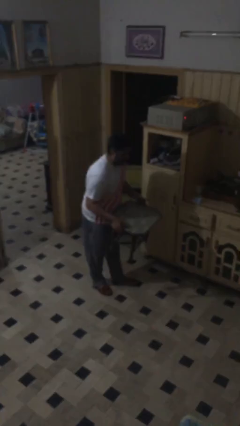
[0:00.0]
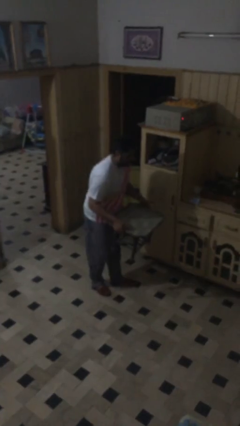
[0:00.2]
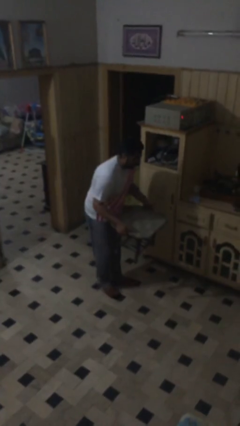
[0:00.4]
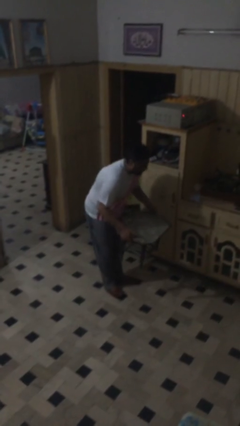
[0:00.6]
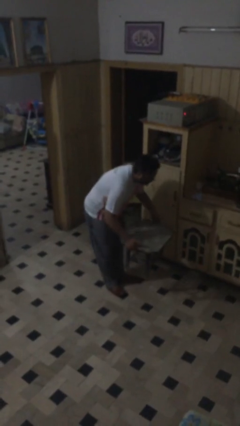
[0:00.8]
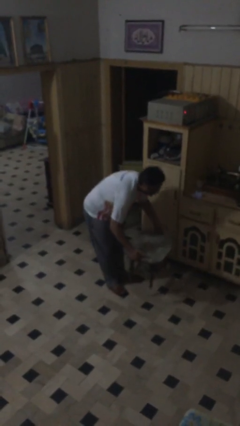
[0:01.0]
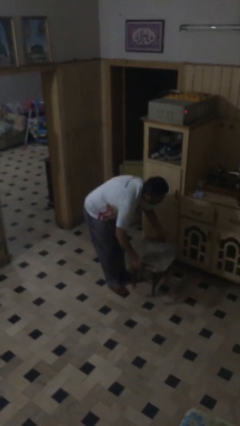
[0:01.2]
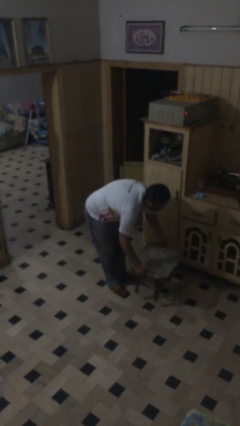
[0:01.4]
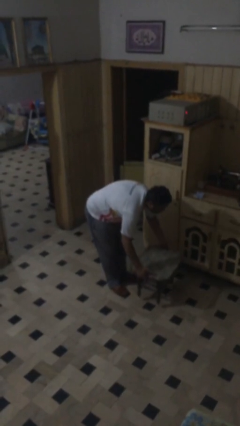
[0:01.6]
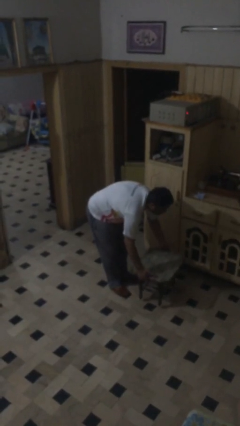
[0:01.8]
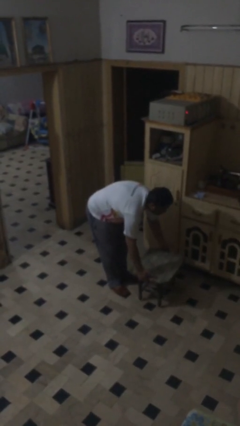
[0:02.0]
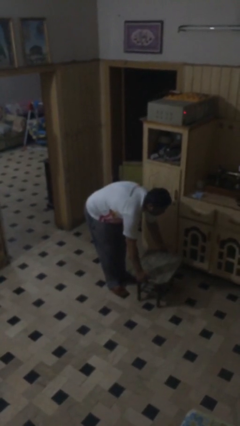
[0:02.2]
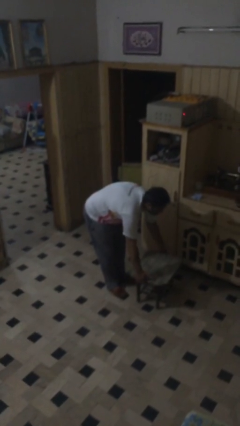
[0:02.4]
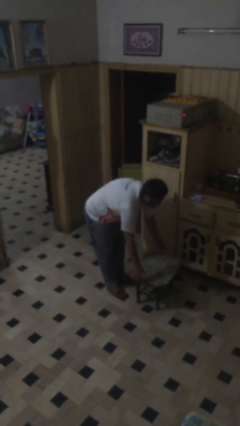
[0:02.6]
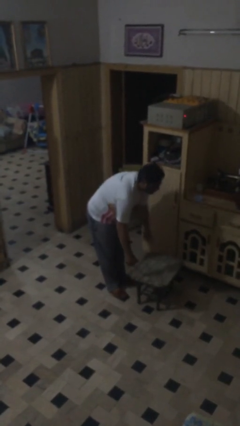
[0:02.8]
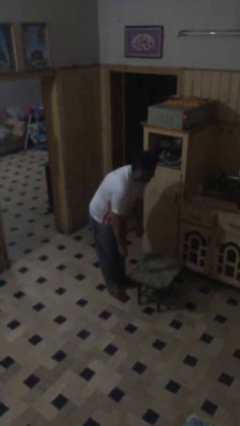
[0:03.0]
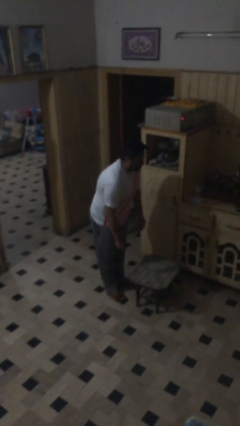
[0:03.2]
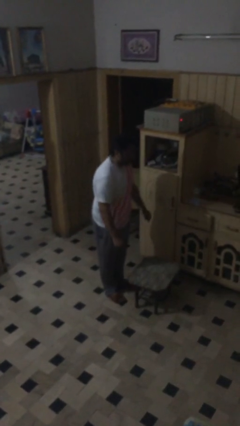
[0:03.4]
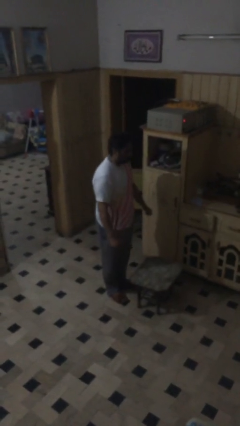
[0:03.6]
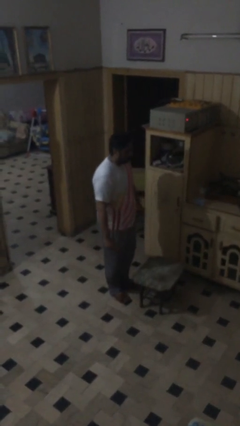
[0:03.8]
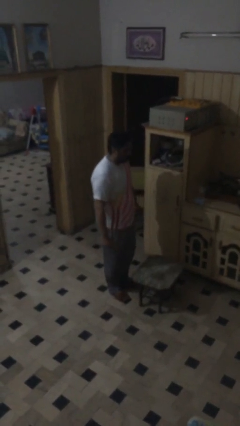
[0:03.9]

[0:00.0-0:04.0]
person puts down object on floor

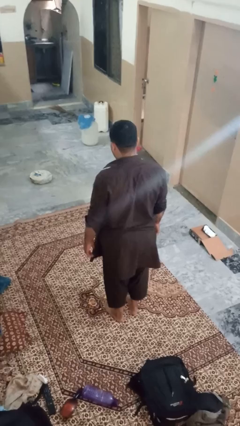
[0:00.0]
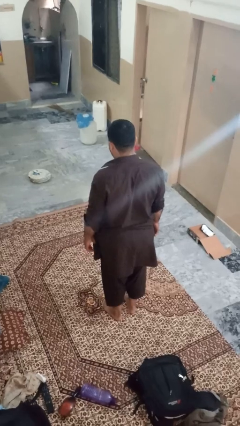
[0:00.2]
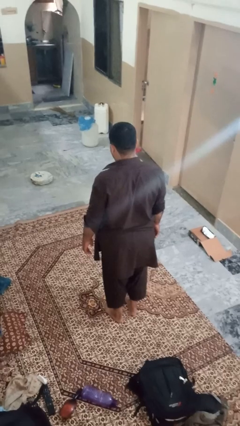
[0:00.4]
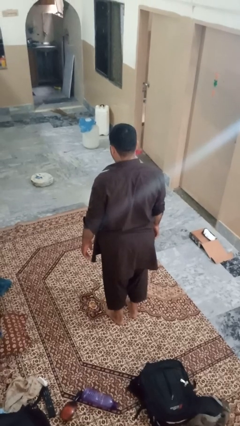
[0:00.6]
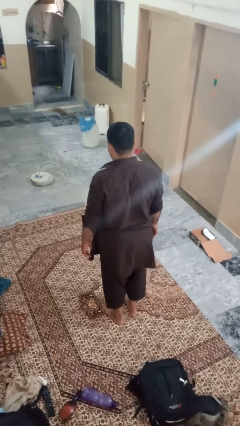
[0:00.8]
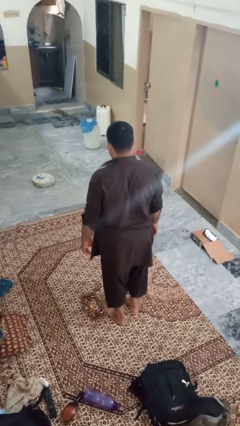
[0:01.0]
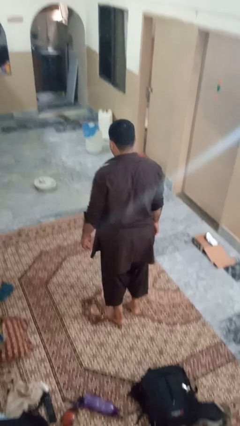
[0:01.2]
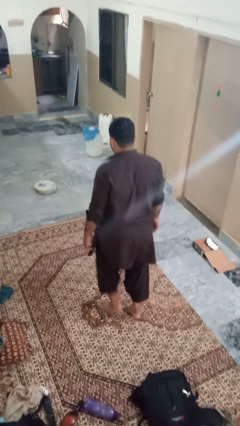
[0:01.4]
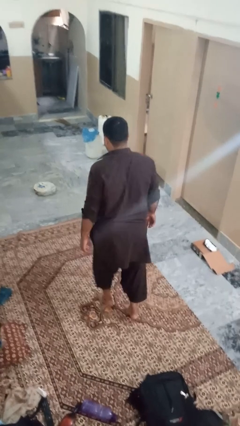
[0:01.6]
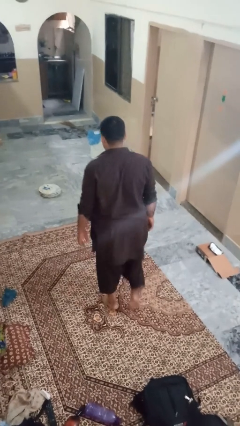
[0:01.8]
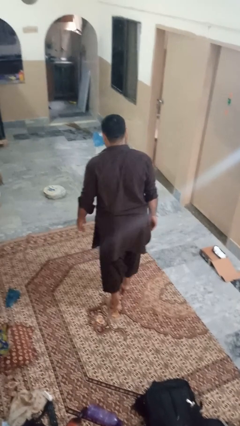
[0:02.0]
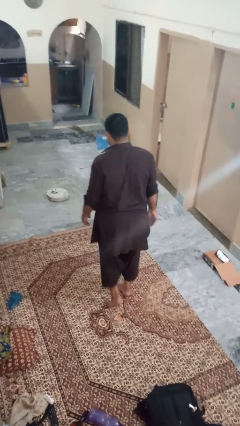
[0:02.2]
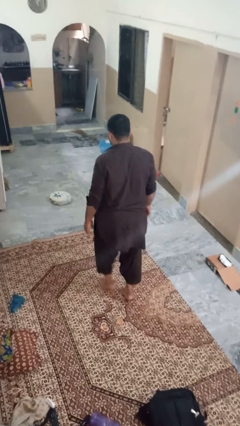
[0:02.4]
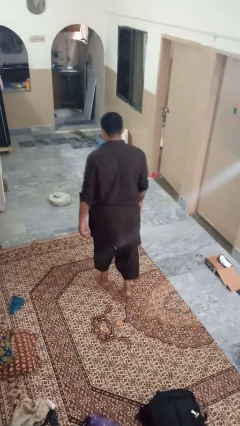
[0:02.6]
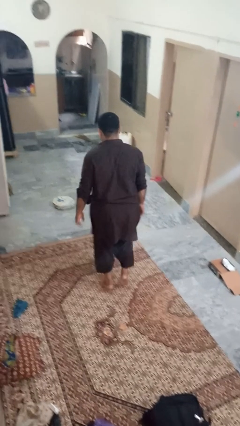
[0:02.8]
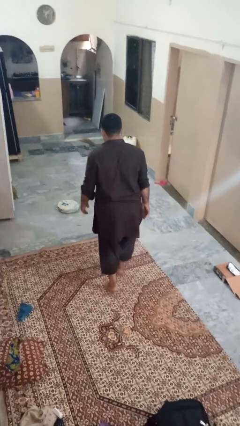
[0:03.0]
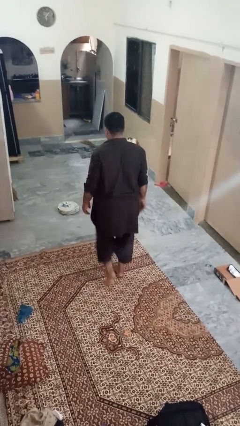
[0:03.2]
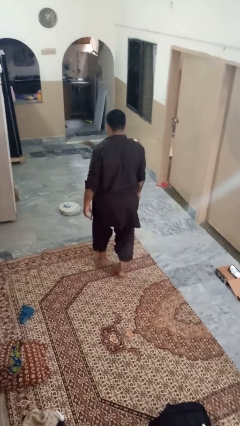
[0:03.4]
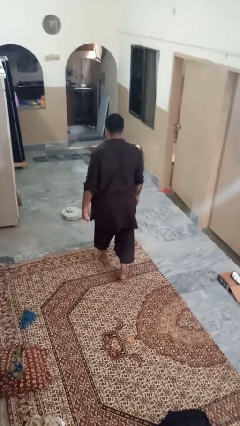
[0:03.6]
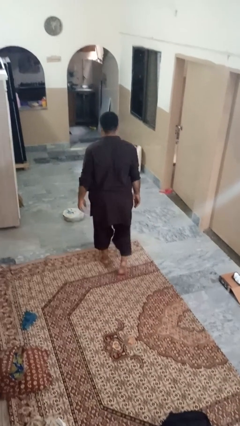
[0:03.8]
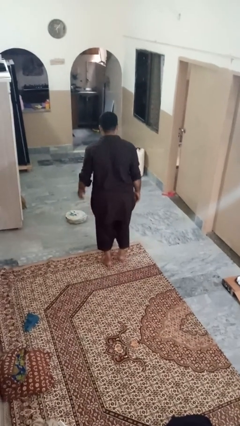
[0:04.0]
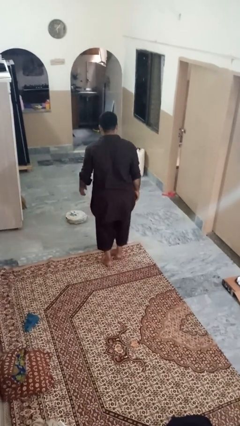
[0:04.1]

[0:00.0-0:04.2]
person walks tiptoe

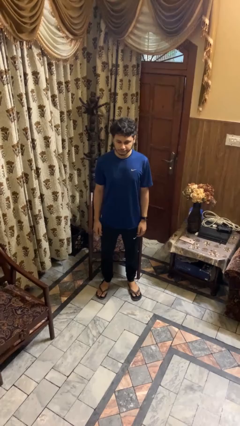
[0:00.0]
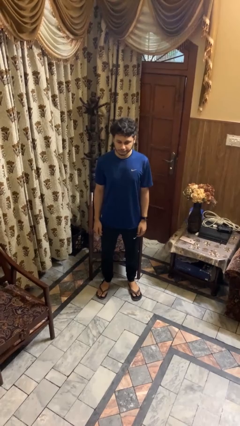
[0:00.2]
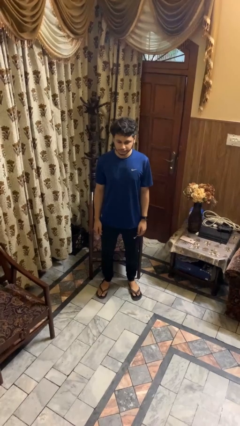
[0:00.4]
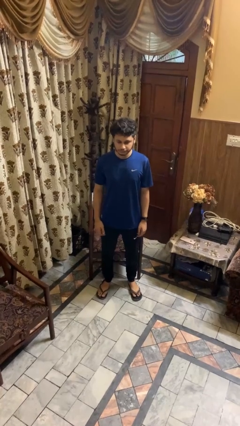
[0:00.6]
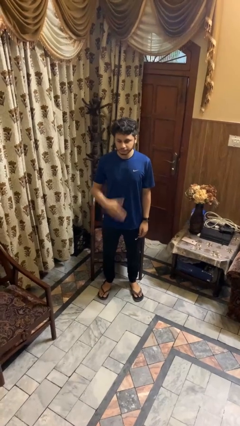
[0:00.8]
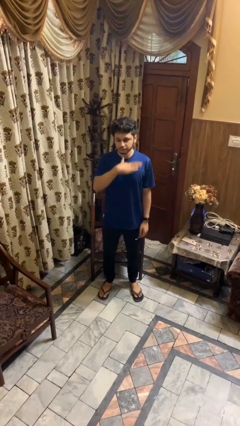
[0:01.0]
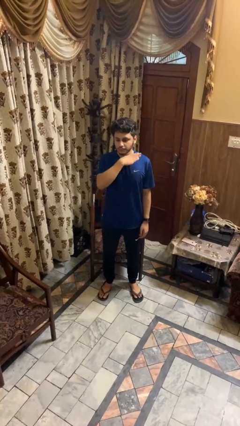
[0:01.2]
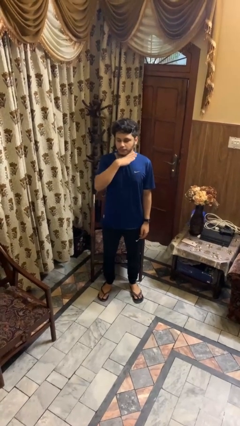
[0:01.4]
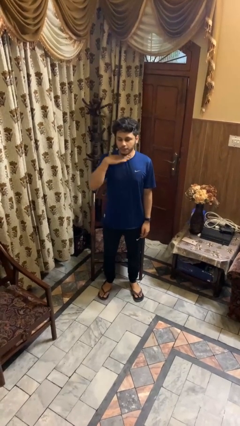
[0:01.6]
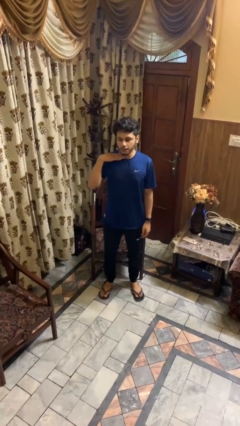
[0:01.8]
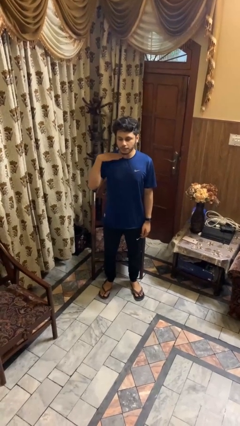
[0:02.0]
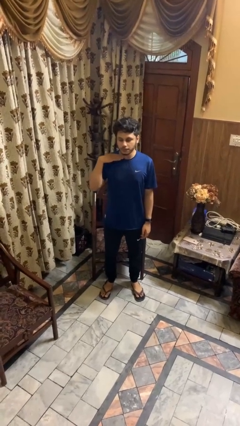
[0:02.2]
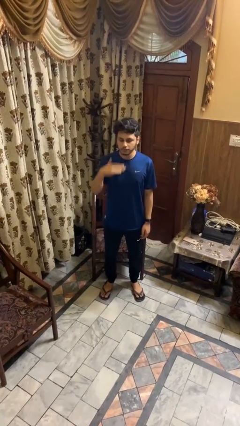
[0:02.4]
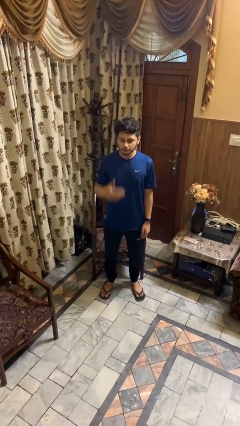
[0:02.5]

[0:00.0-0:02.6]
person gestures cut

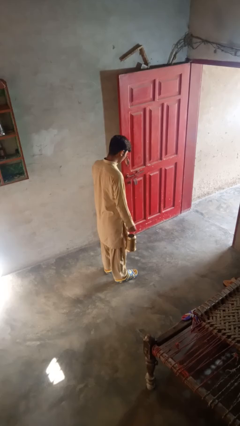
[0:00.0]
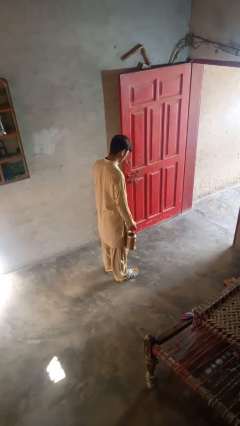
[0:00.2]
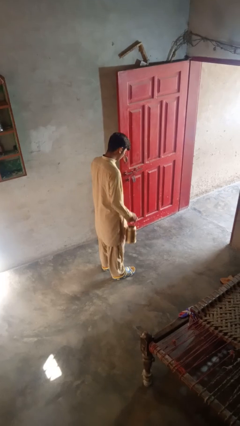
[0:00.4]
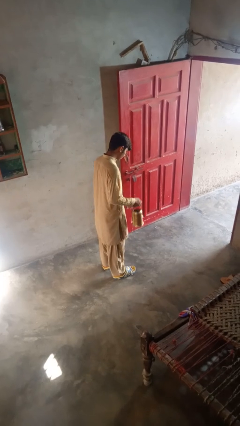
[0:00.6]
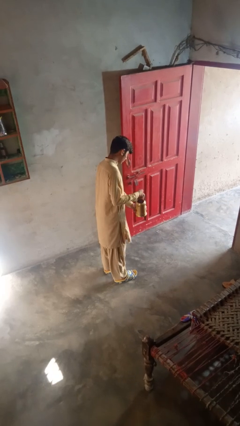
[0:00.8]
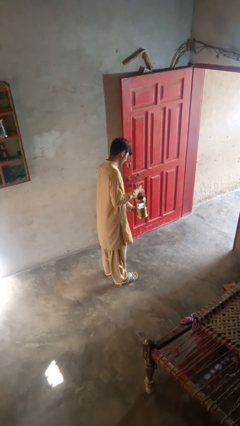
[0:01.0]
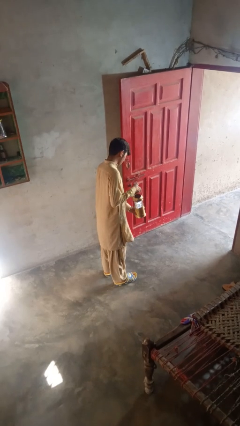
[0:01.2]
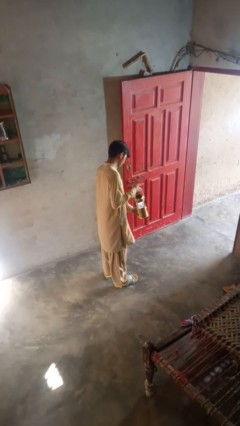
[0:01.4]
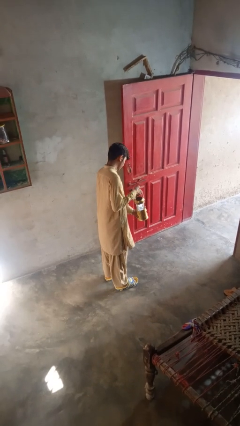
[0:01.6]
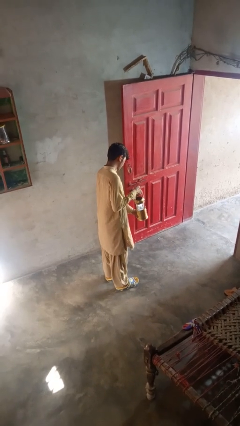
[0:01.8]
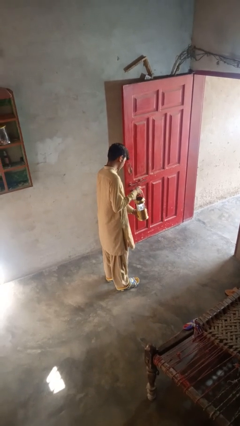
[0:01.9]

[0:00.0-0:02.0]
person turns on lamp

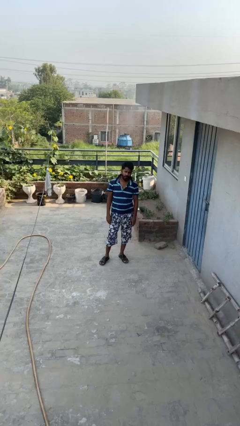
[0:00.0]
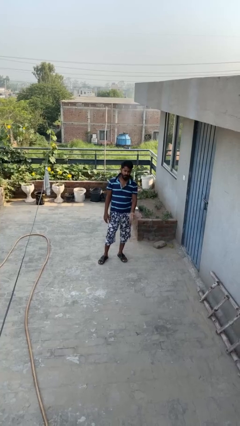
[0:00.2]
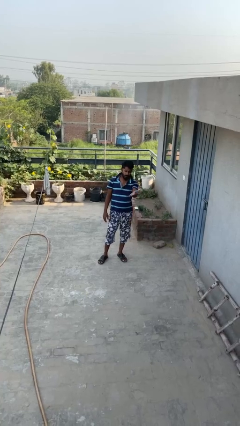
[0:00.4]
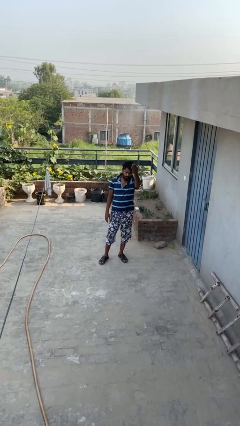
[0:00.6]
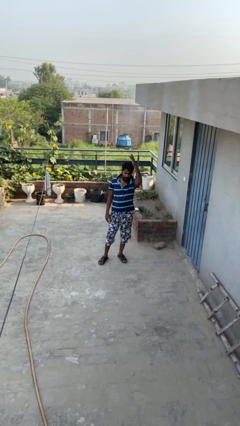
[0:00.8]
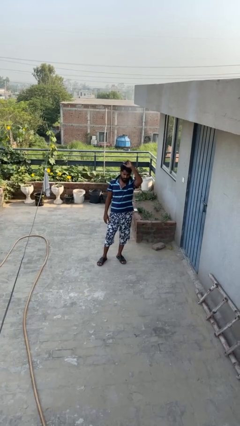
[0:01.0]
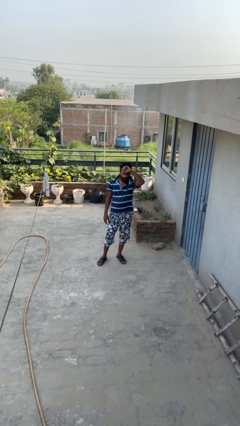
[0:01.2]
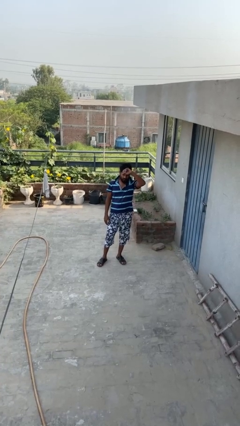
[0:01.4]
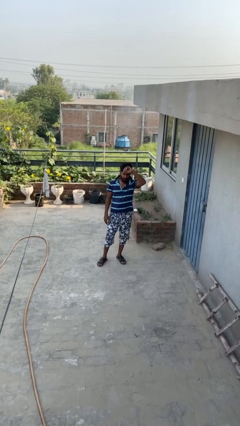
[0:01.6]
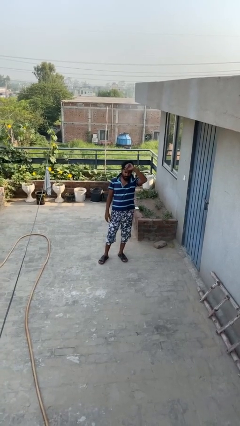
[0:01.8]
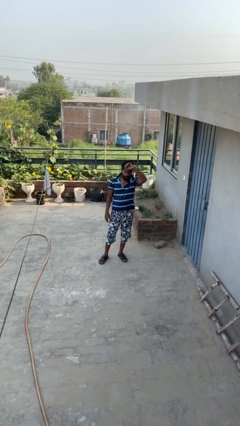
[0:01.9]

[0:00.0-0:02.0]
person gestures swipe up

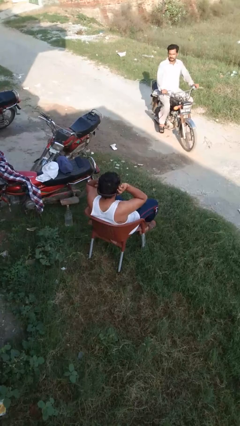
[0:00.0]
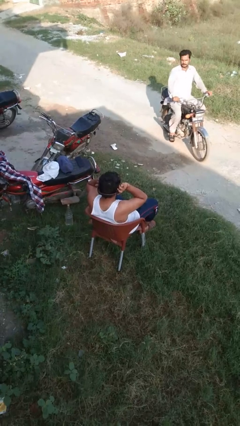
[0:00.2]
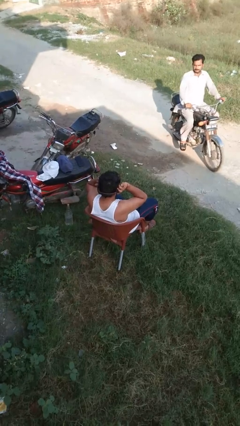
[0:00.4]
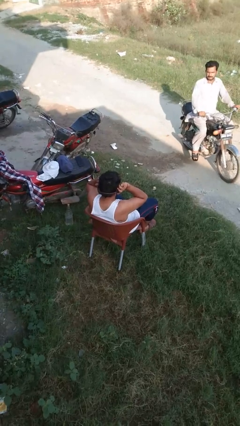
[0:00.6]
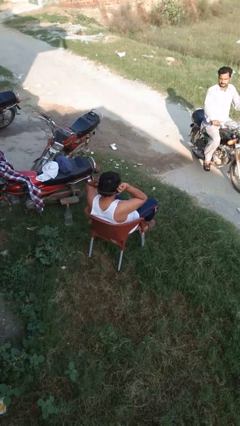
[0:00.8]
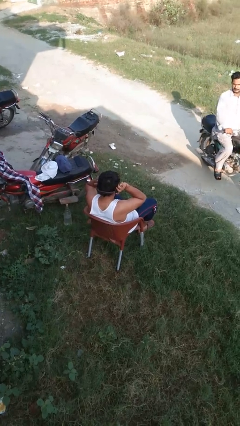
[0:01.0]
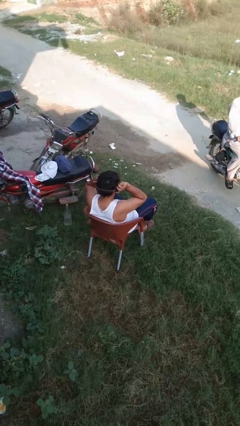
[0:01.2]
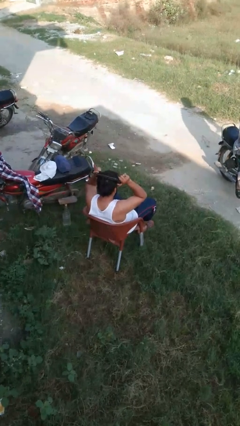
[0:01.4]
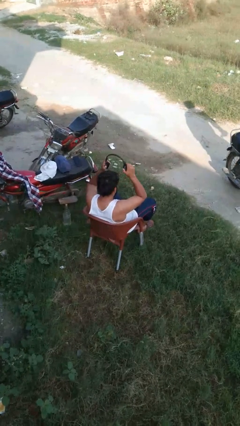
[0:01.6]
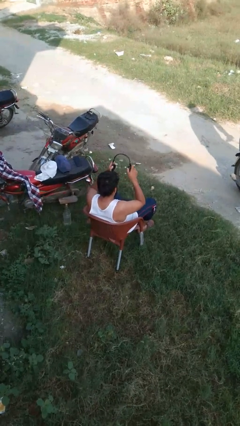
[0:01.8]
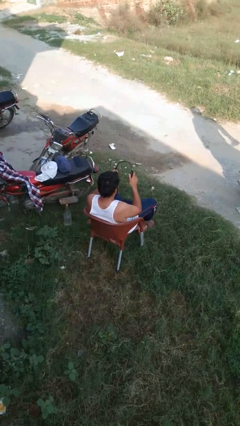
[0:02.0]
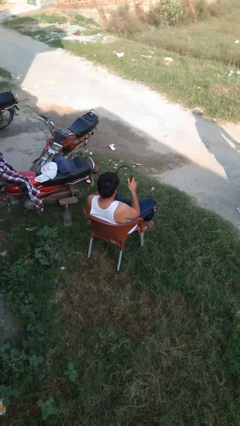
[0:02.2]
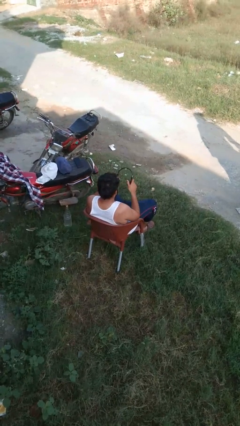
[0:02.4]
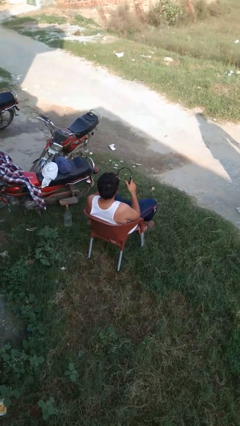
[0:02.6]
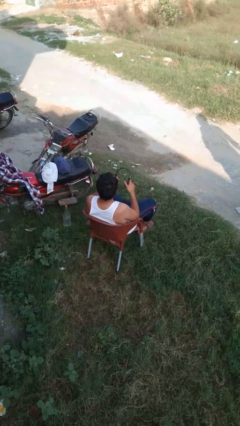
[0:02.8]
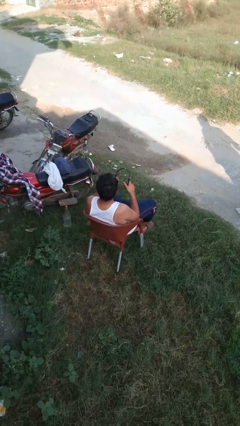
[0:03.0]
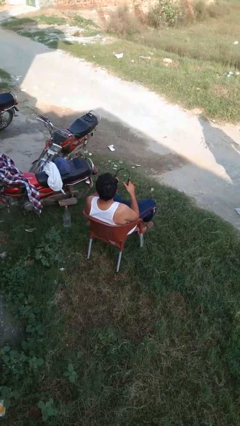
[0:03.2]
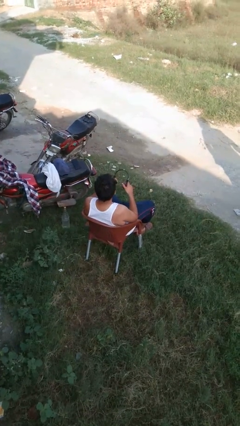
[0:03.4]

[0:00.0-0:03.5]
person takes off headphones
